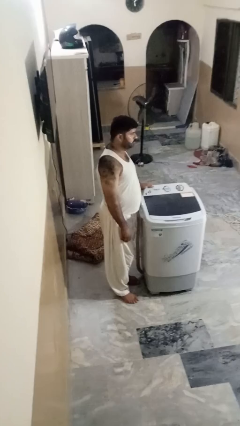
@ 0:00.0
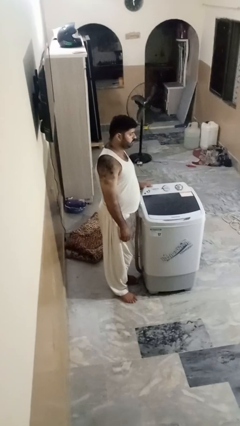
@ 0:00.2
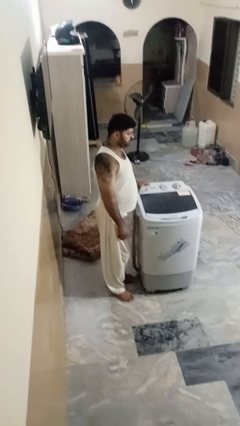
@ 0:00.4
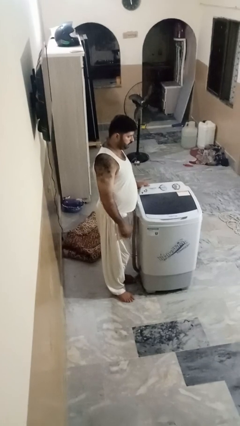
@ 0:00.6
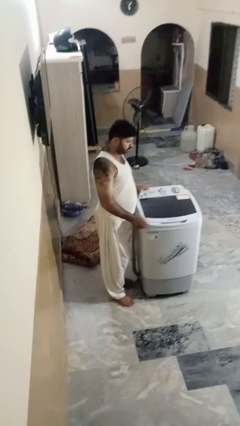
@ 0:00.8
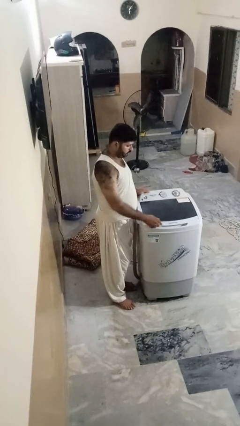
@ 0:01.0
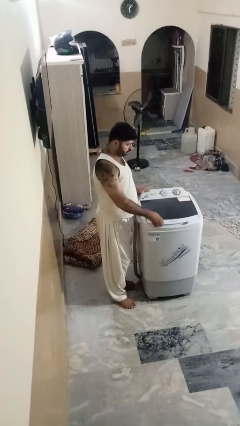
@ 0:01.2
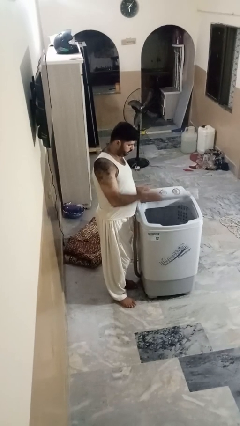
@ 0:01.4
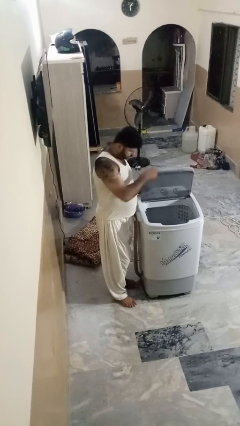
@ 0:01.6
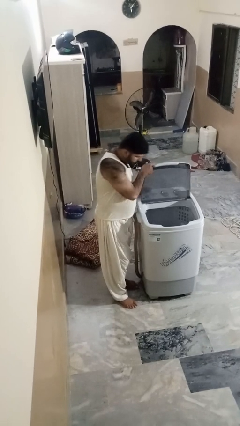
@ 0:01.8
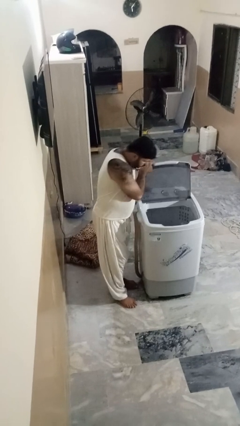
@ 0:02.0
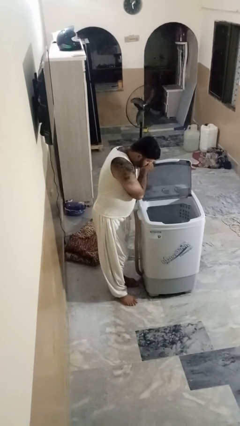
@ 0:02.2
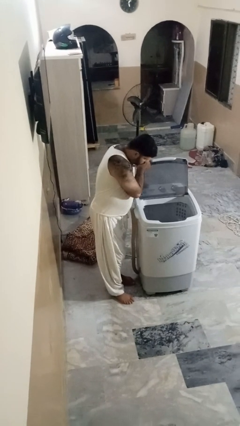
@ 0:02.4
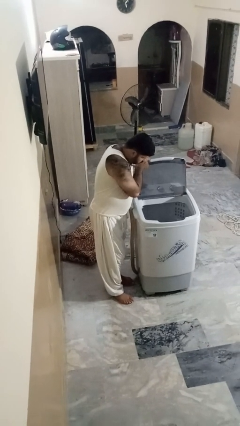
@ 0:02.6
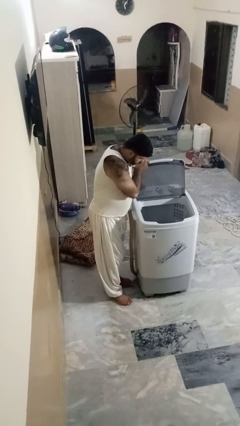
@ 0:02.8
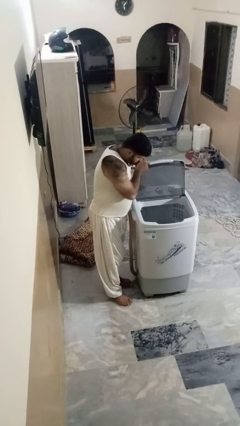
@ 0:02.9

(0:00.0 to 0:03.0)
person opens clothes washer

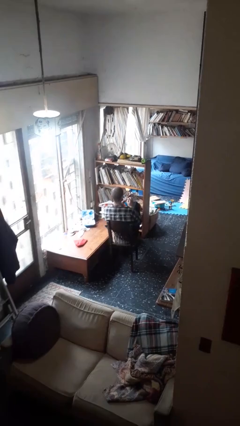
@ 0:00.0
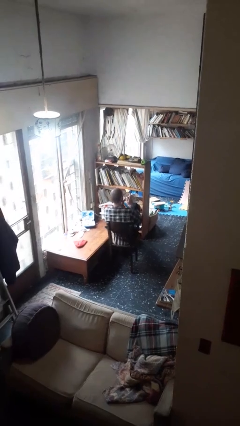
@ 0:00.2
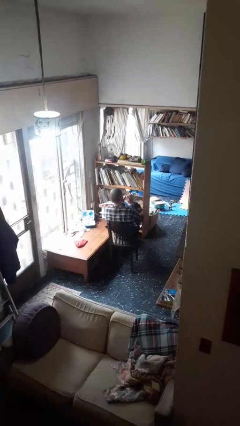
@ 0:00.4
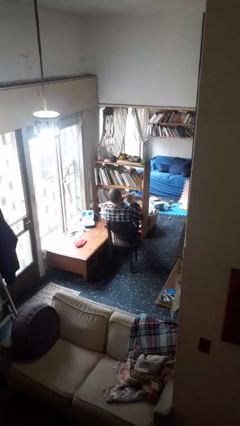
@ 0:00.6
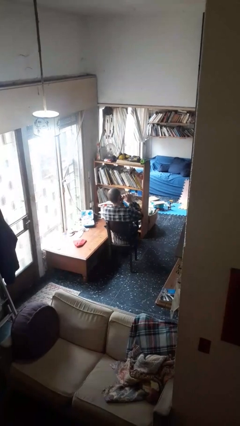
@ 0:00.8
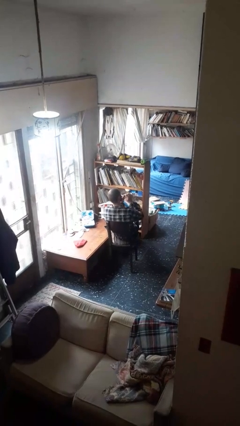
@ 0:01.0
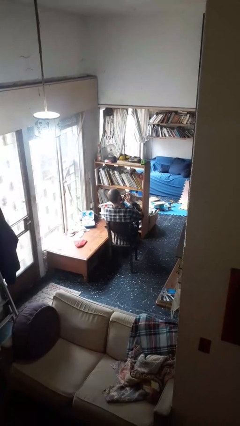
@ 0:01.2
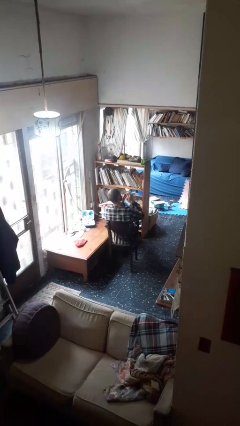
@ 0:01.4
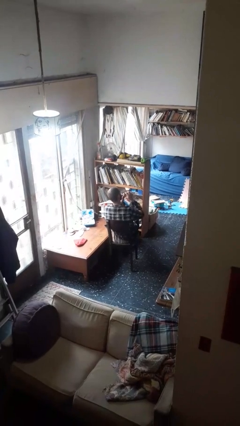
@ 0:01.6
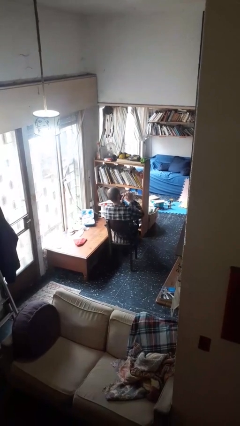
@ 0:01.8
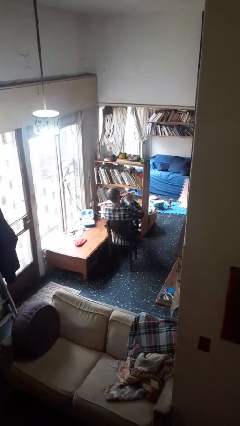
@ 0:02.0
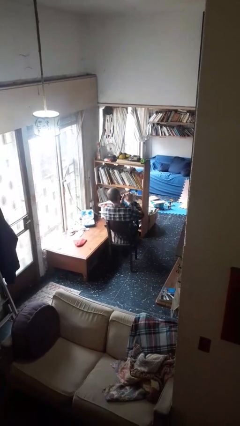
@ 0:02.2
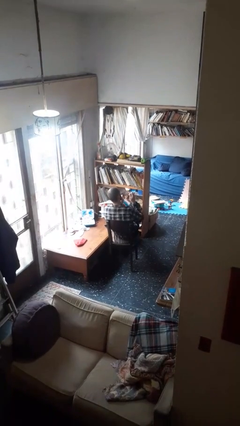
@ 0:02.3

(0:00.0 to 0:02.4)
person files fingernails

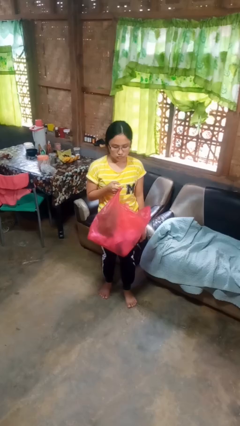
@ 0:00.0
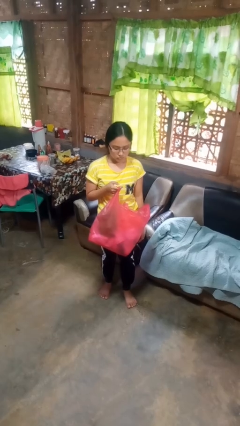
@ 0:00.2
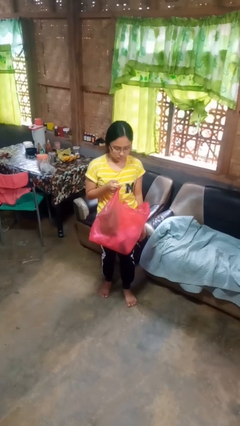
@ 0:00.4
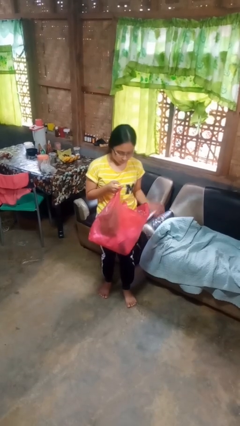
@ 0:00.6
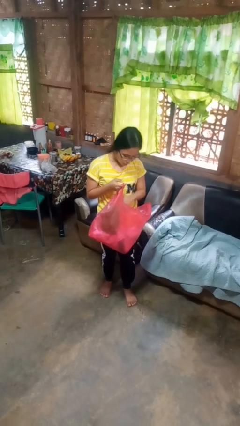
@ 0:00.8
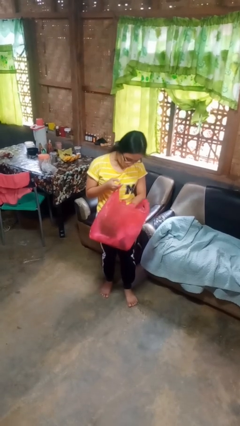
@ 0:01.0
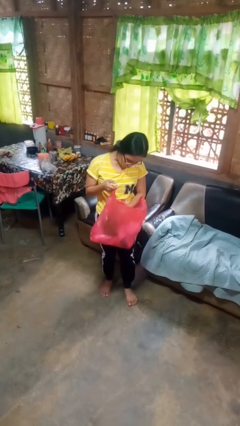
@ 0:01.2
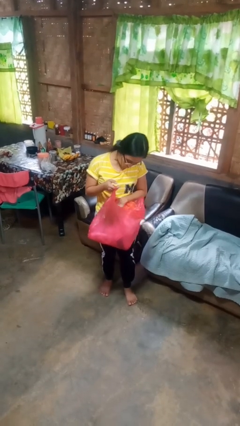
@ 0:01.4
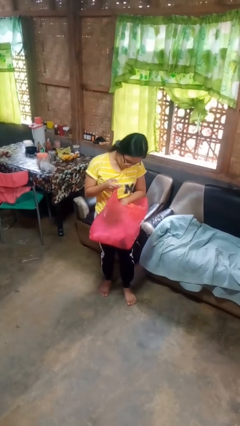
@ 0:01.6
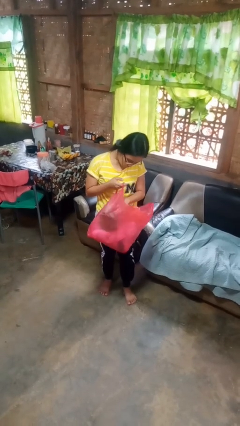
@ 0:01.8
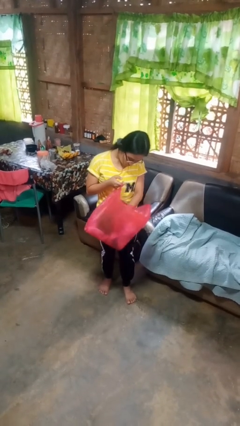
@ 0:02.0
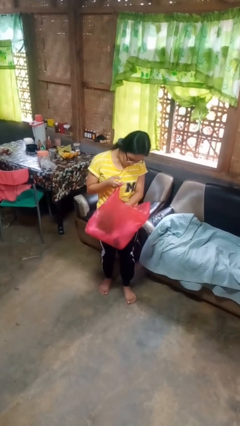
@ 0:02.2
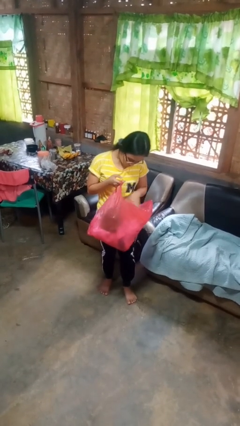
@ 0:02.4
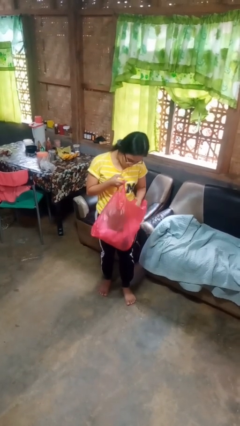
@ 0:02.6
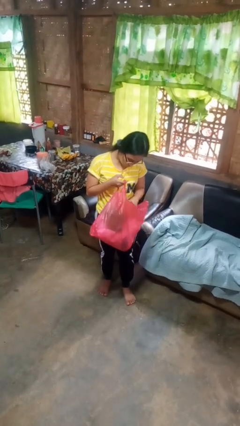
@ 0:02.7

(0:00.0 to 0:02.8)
person searches in bag

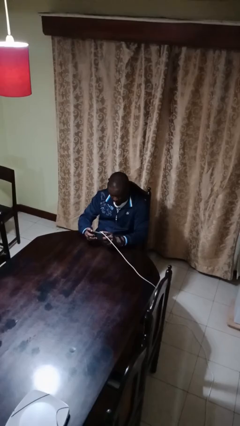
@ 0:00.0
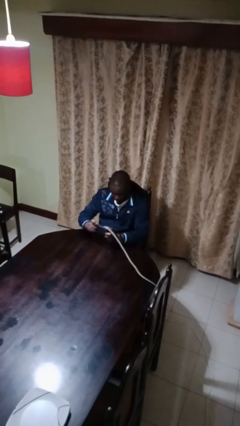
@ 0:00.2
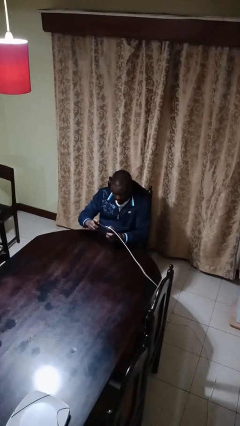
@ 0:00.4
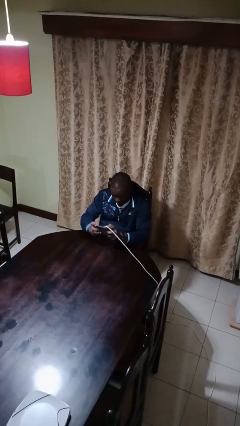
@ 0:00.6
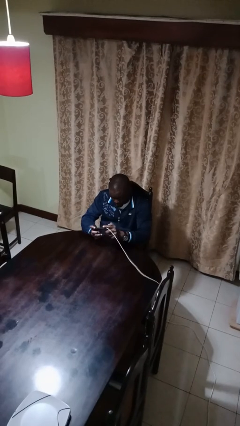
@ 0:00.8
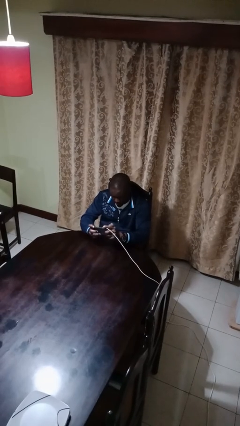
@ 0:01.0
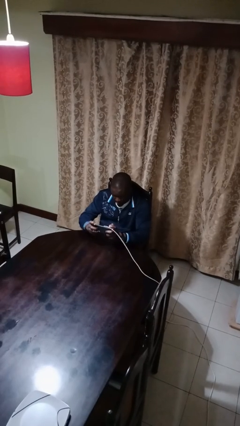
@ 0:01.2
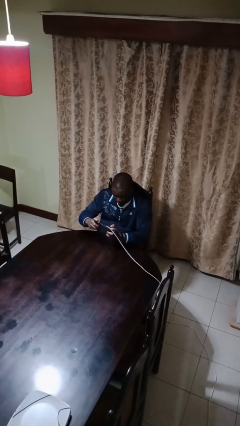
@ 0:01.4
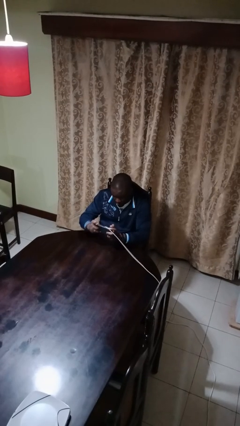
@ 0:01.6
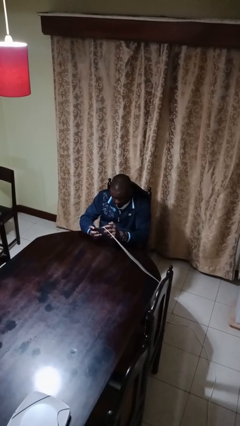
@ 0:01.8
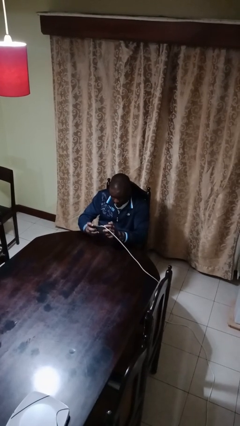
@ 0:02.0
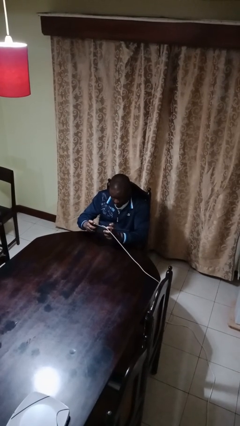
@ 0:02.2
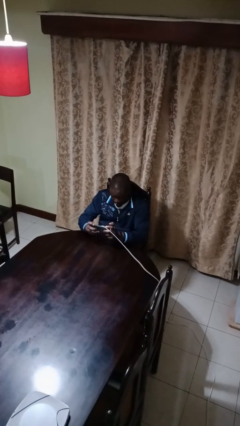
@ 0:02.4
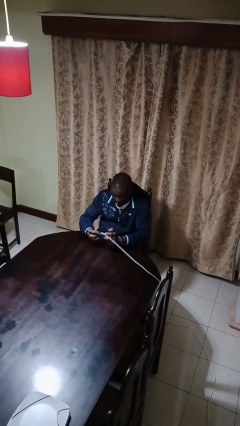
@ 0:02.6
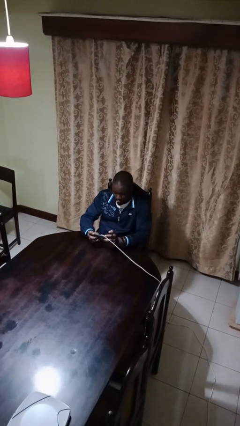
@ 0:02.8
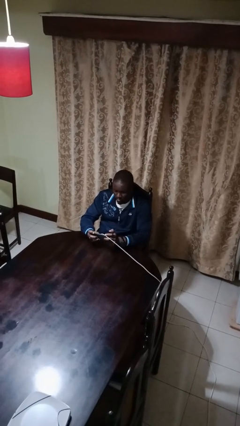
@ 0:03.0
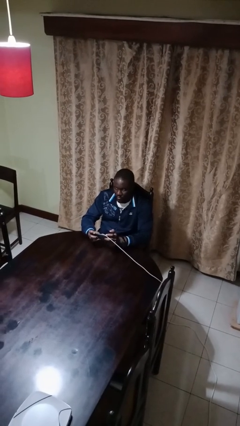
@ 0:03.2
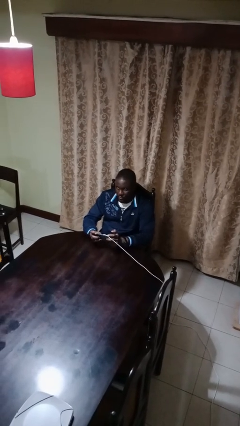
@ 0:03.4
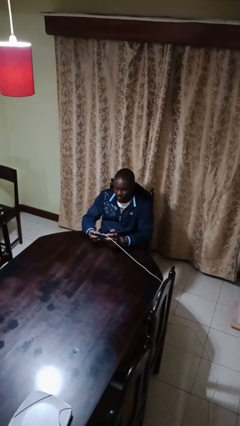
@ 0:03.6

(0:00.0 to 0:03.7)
person interacts with handheld game

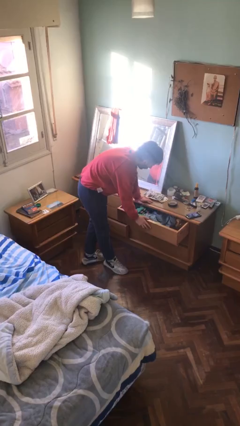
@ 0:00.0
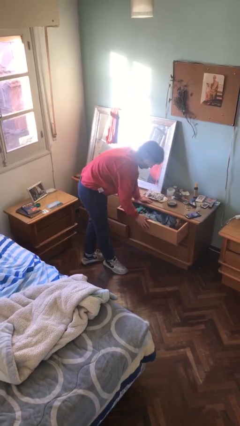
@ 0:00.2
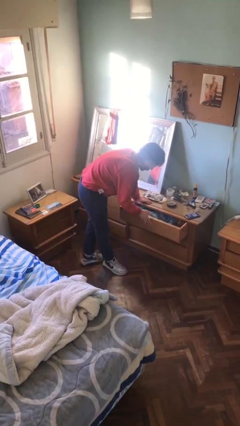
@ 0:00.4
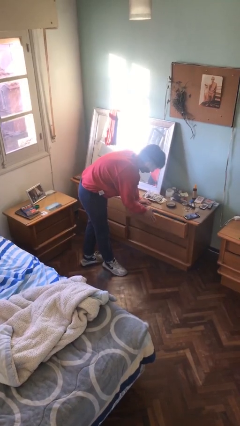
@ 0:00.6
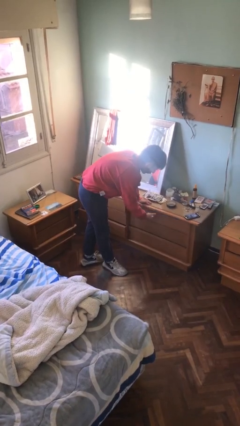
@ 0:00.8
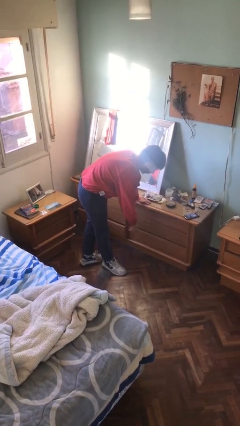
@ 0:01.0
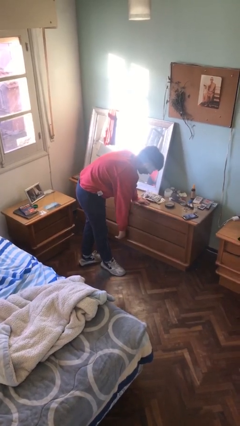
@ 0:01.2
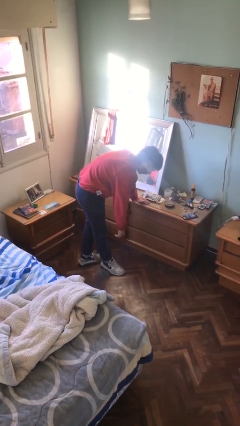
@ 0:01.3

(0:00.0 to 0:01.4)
person closes dresser drawer

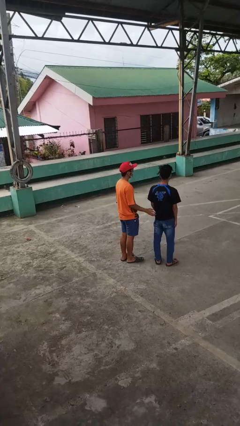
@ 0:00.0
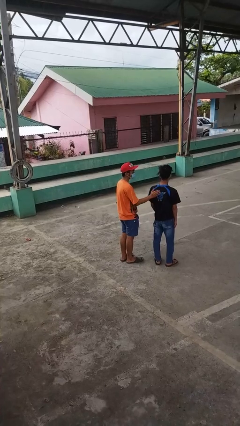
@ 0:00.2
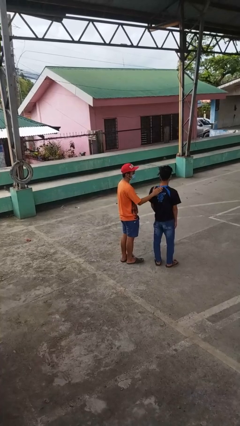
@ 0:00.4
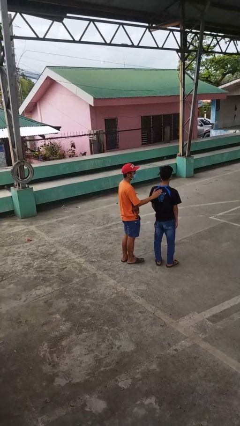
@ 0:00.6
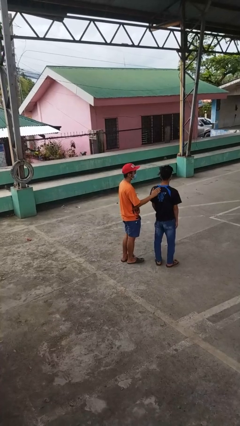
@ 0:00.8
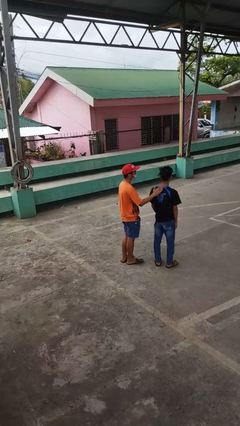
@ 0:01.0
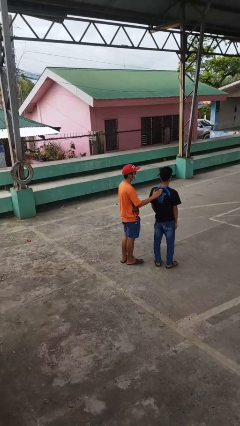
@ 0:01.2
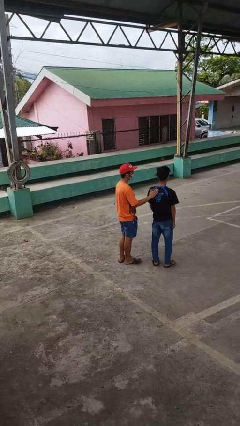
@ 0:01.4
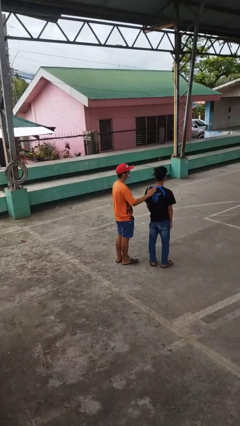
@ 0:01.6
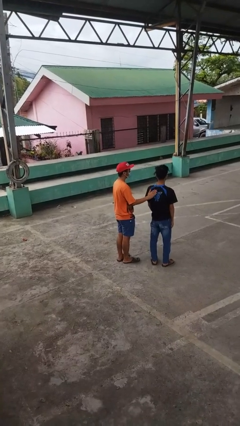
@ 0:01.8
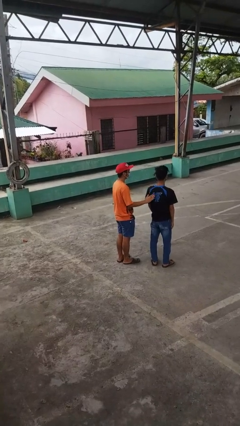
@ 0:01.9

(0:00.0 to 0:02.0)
person touches back of person

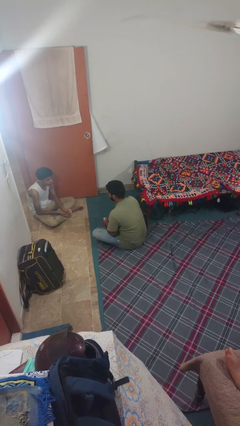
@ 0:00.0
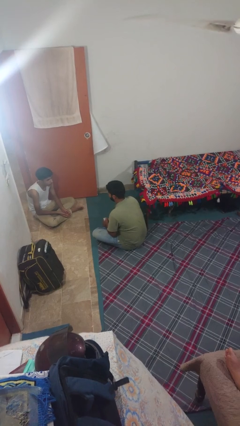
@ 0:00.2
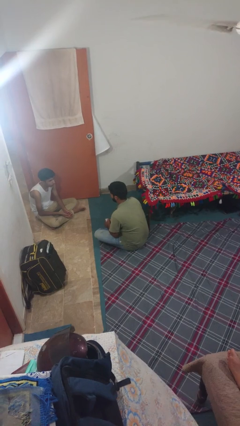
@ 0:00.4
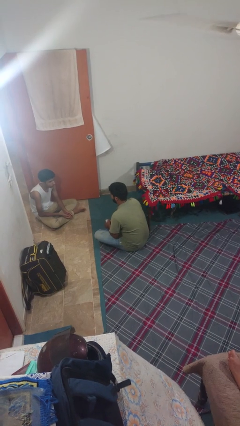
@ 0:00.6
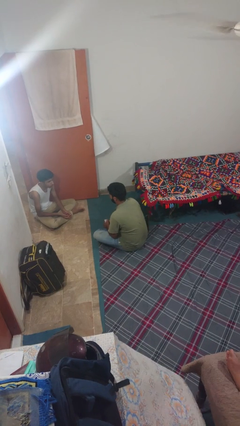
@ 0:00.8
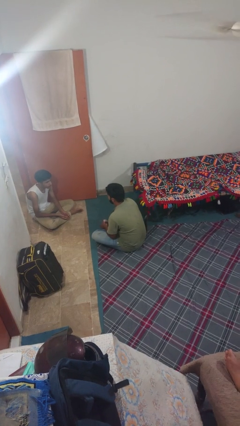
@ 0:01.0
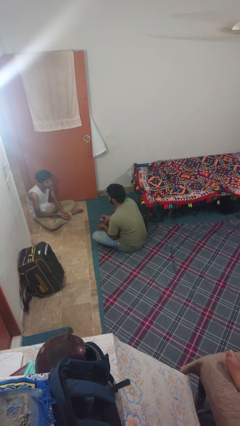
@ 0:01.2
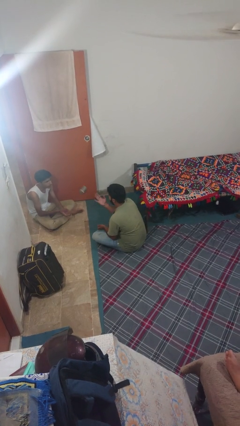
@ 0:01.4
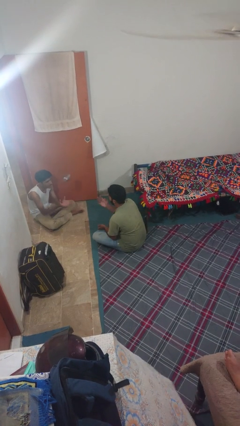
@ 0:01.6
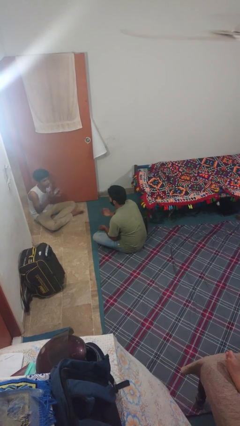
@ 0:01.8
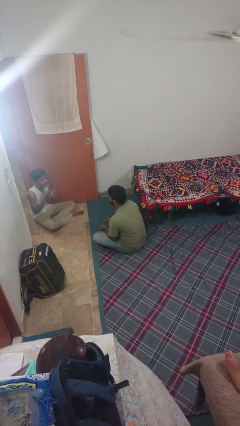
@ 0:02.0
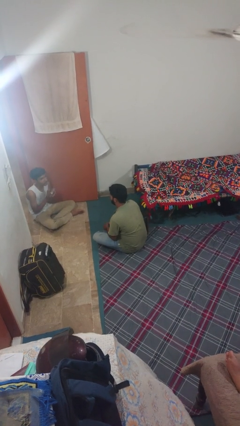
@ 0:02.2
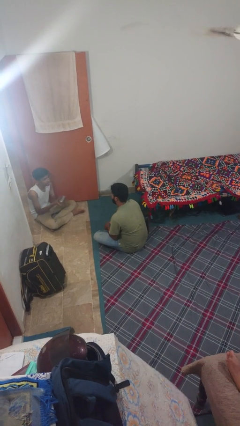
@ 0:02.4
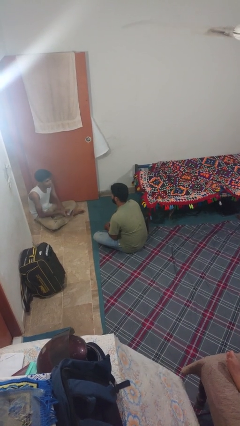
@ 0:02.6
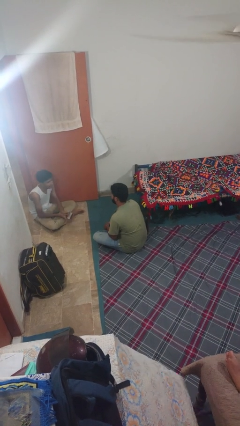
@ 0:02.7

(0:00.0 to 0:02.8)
person throws object to person
